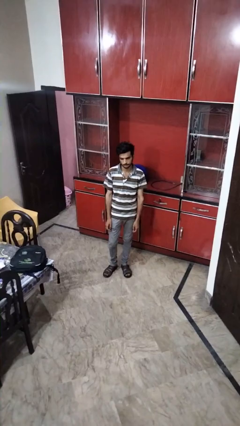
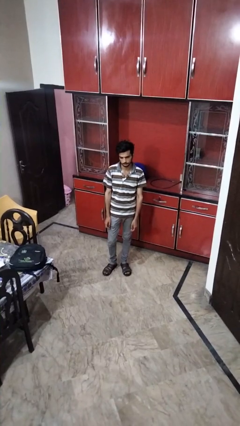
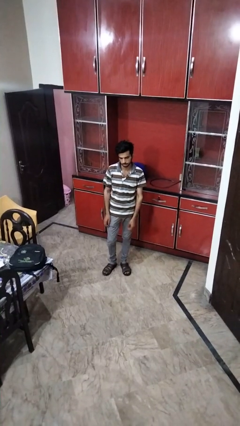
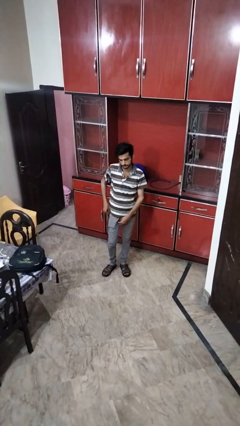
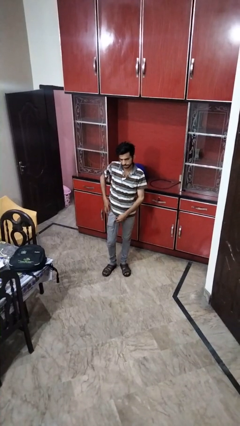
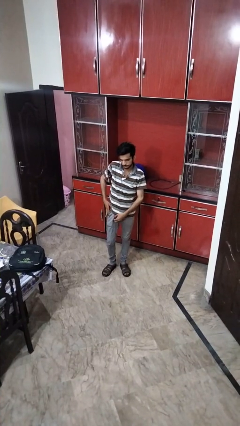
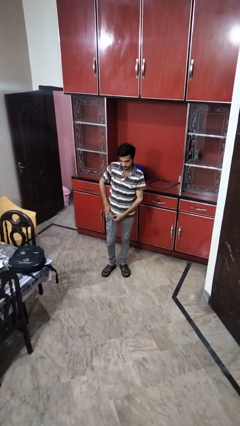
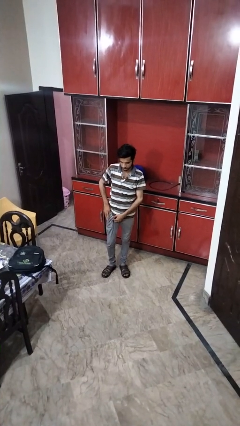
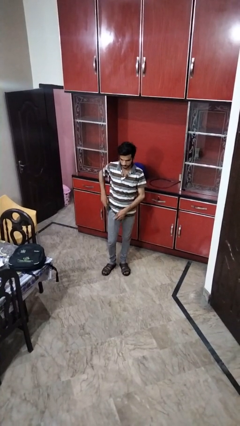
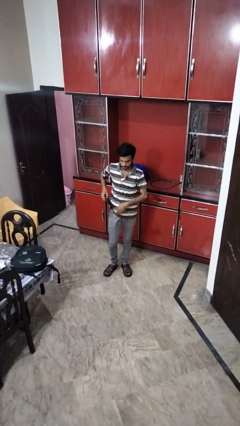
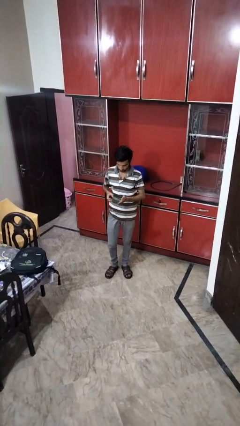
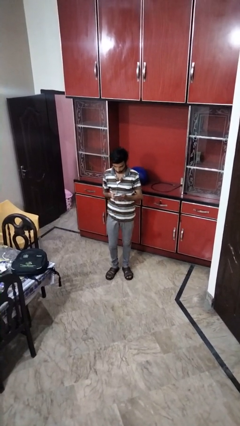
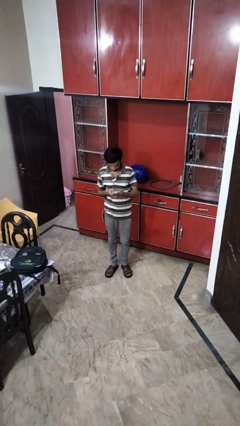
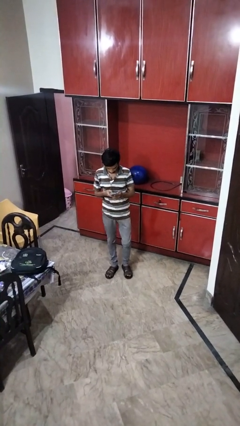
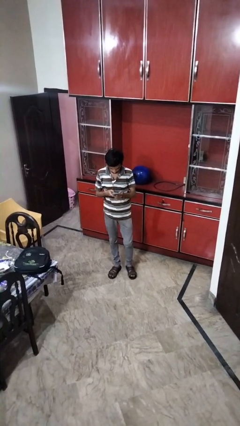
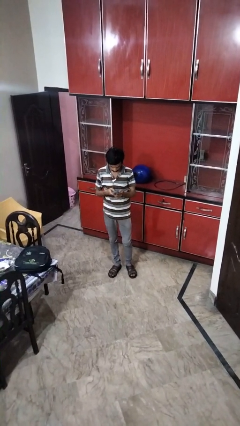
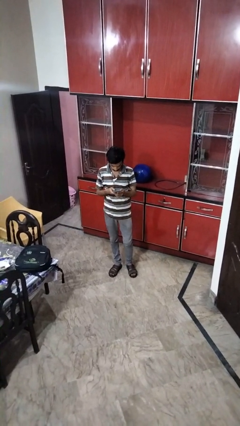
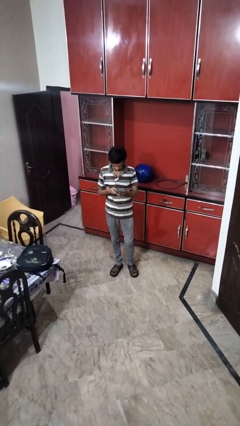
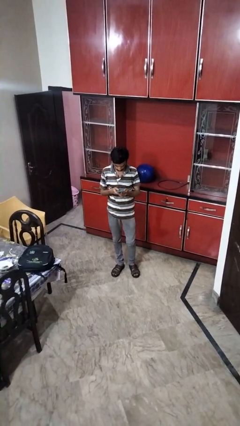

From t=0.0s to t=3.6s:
person takes phone from pocket

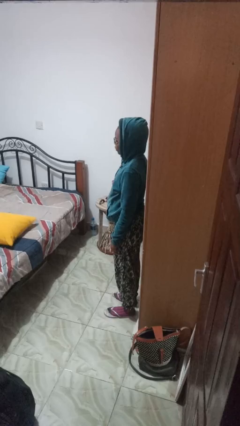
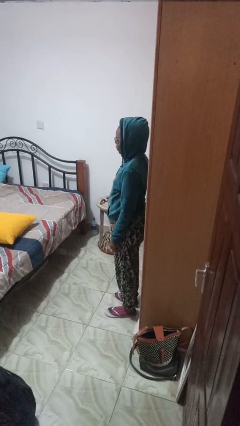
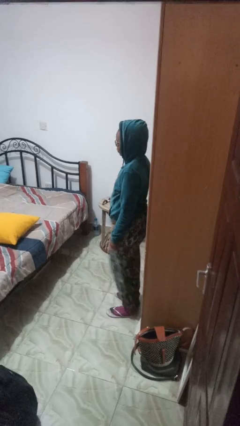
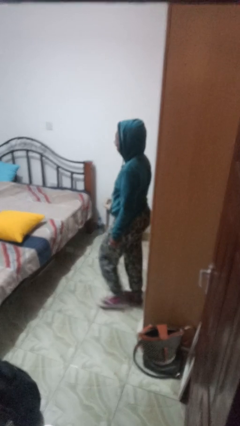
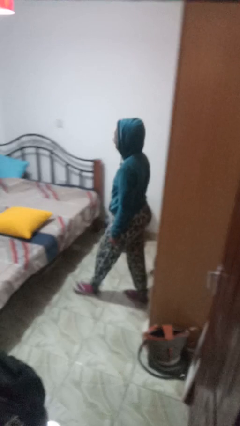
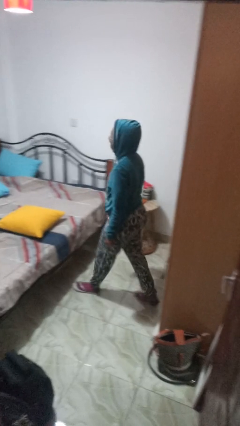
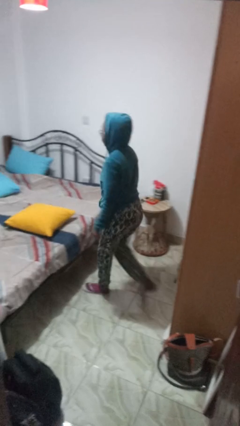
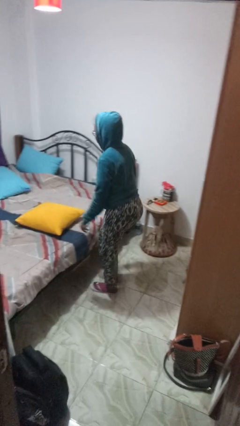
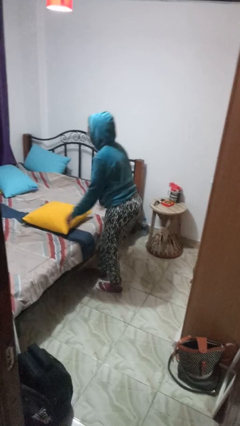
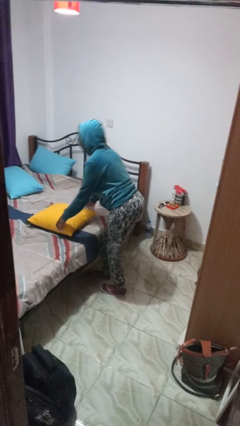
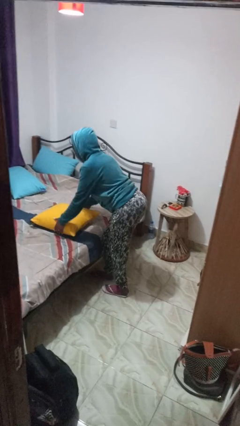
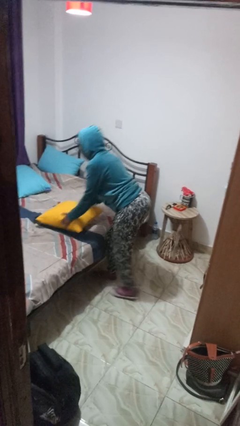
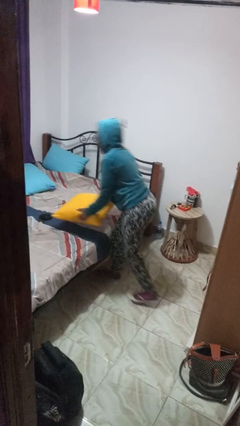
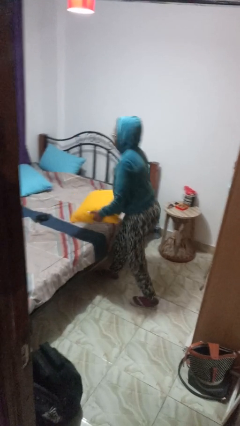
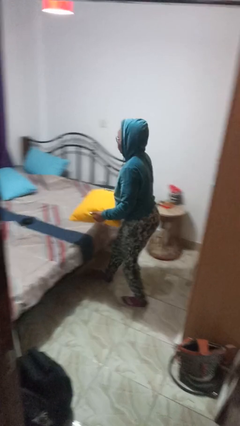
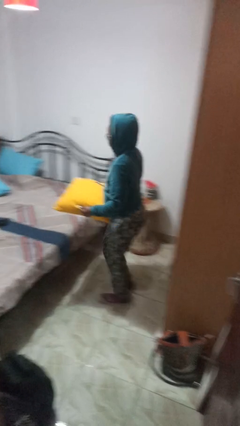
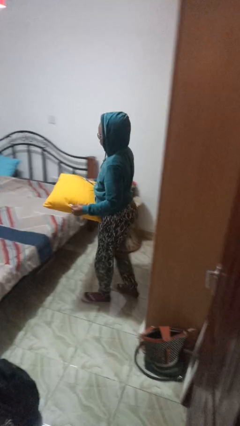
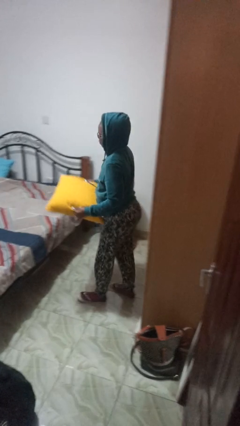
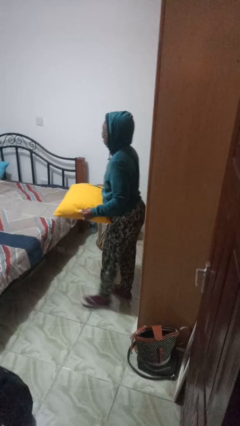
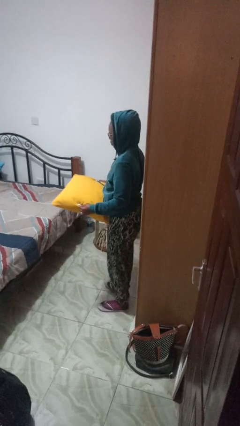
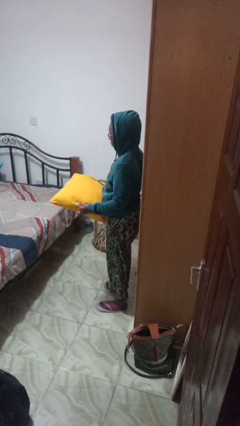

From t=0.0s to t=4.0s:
person picks up object from bed

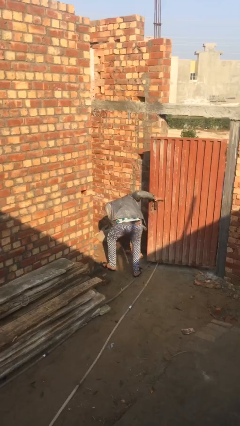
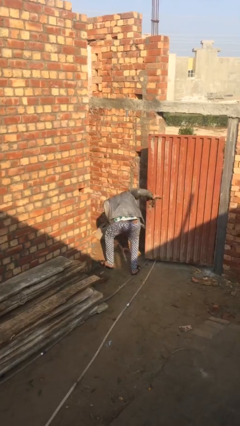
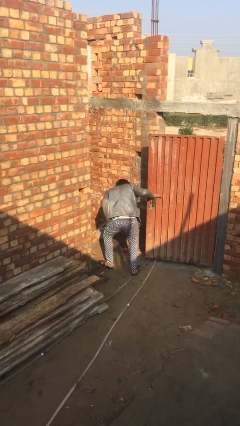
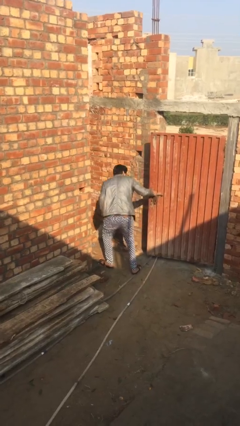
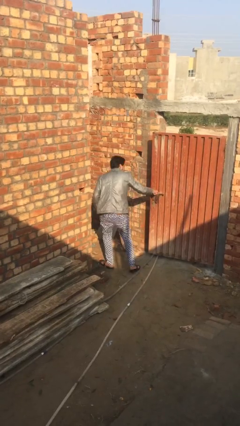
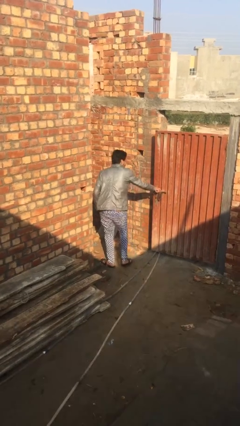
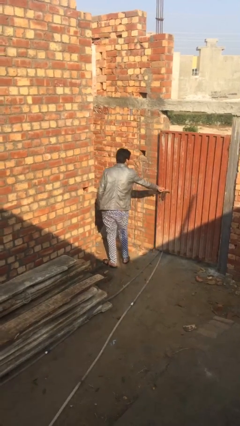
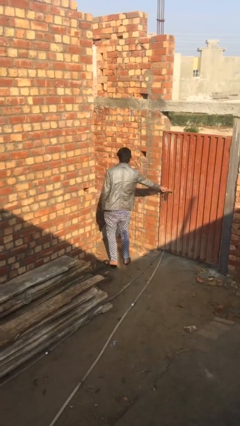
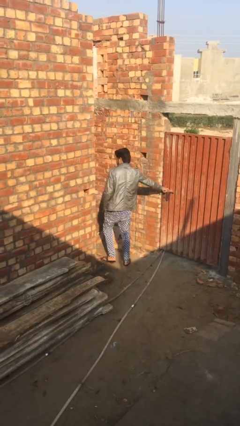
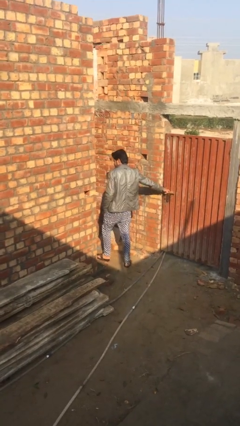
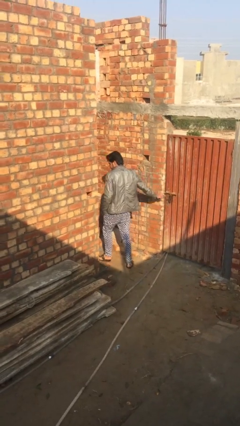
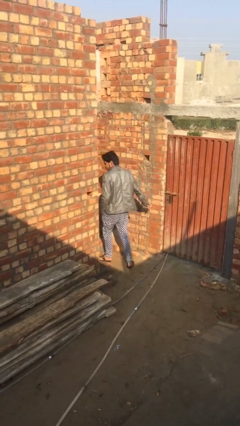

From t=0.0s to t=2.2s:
person closes facility door

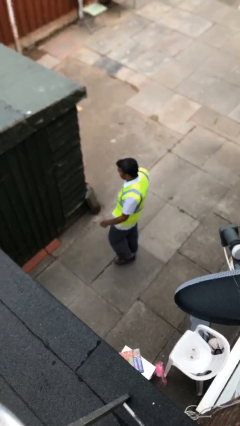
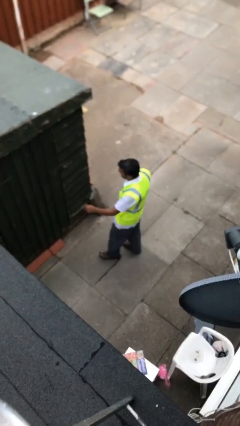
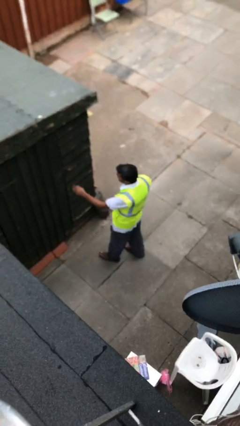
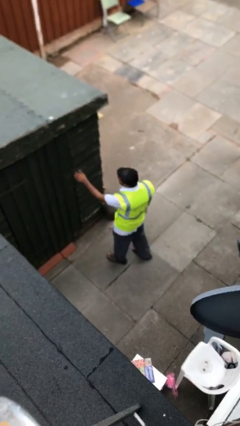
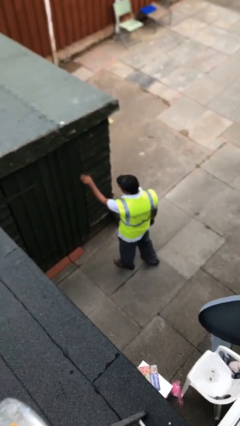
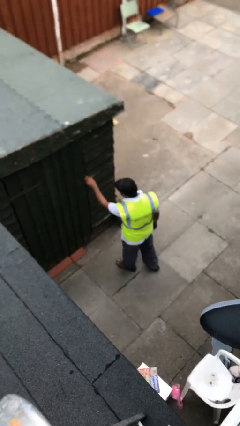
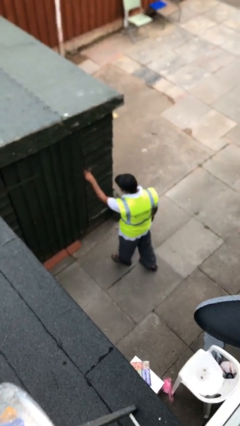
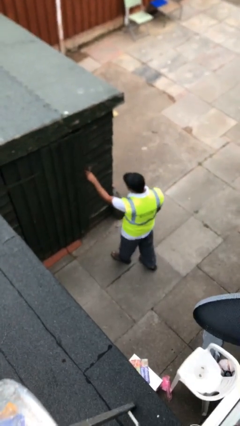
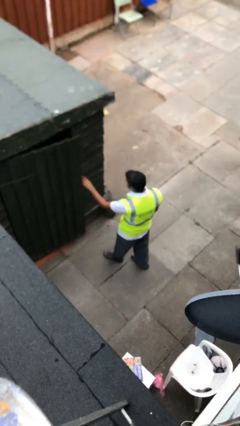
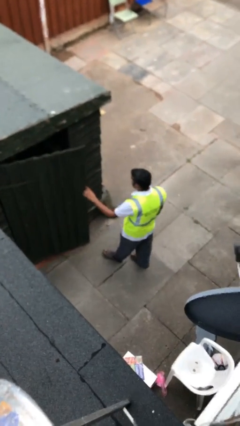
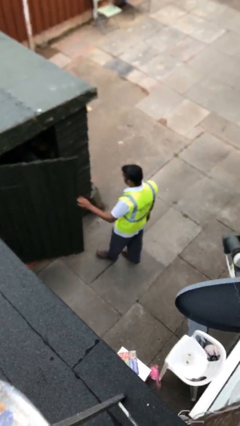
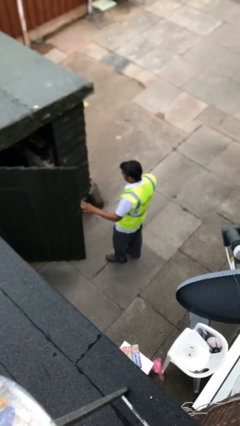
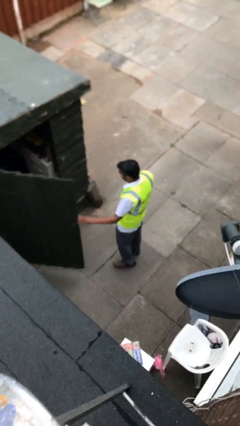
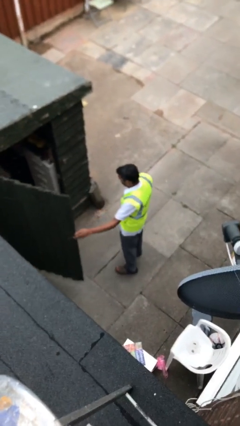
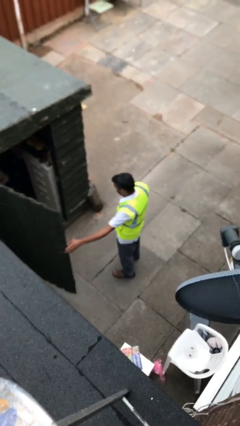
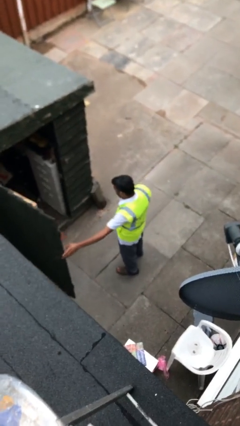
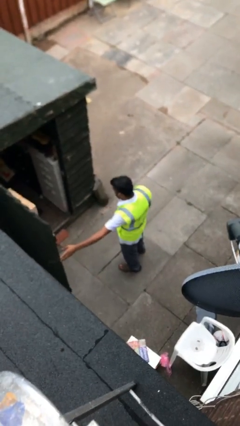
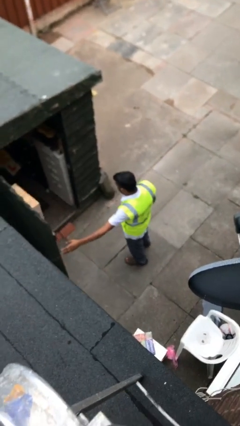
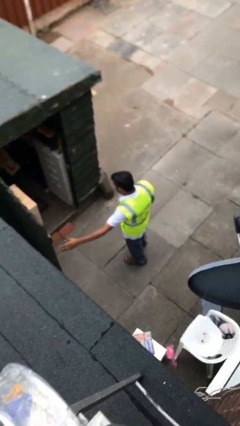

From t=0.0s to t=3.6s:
person opens facility door

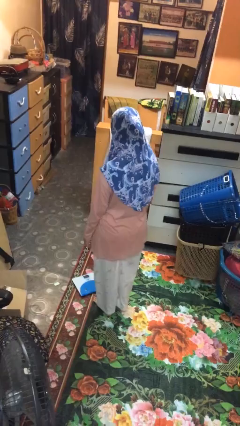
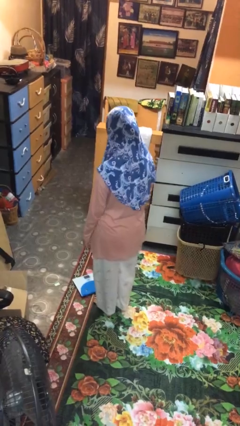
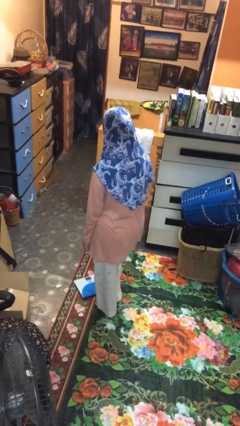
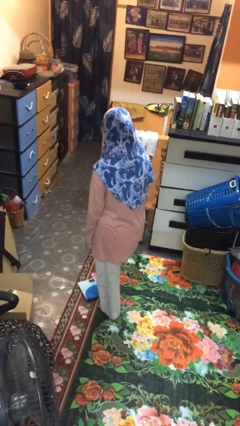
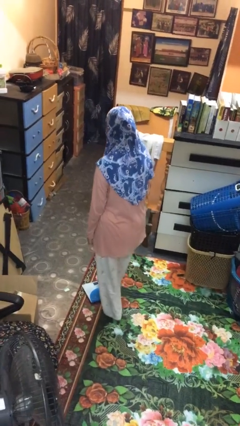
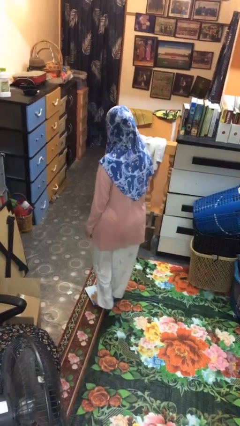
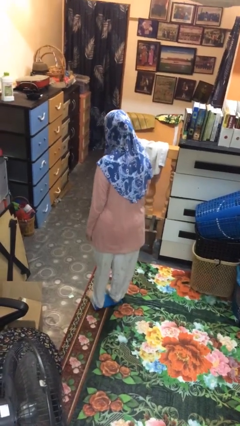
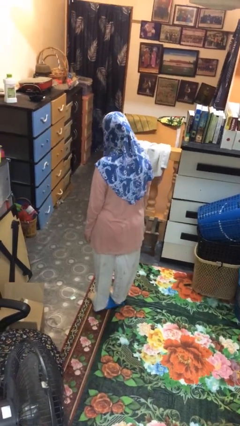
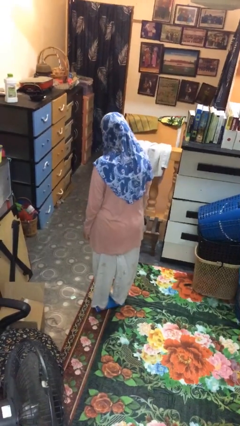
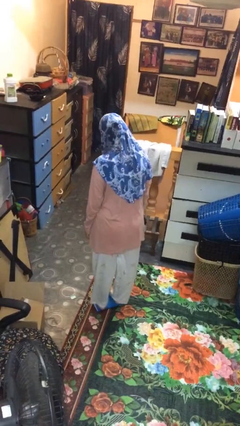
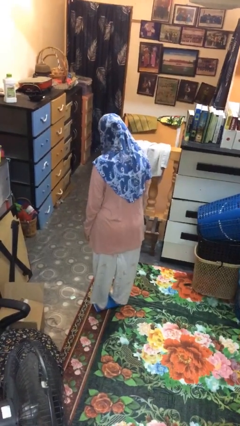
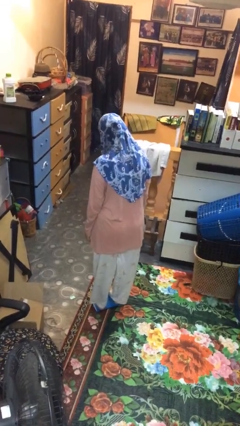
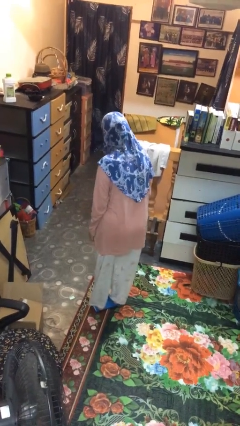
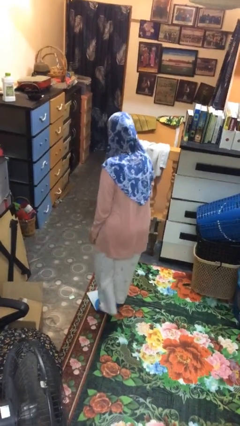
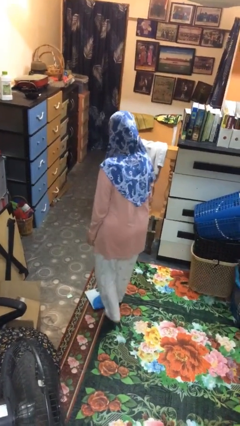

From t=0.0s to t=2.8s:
person uses bodyweight scale

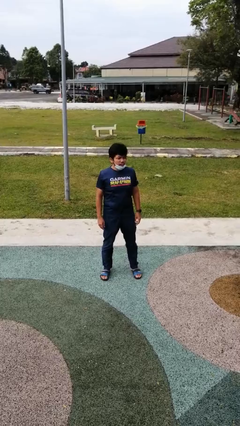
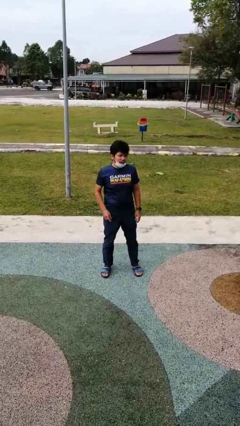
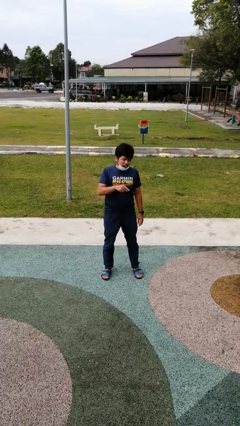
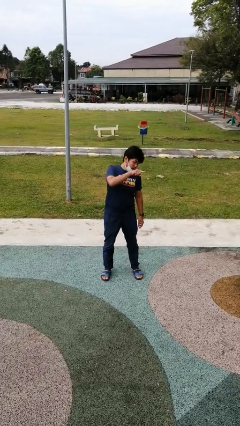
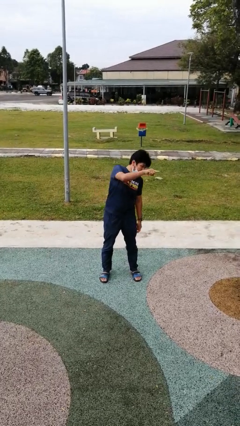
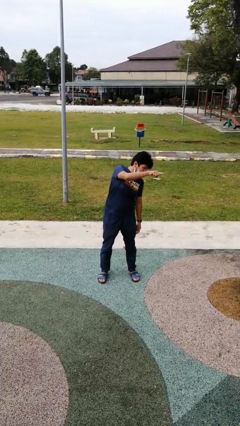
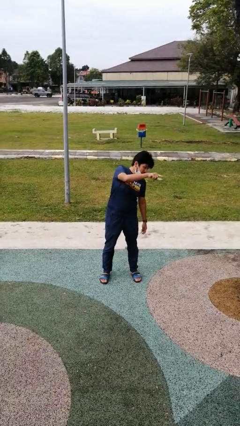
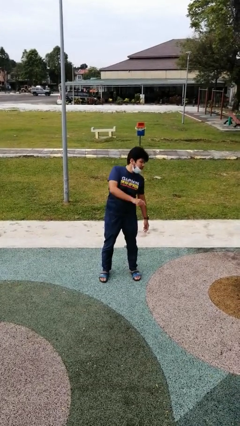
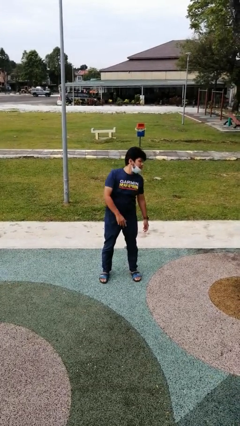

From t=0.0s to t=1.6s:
person points at person
